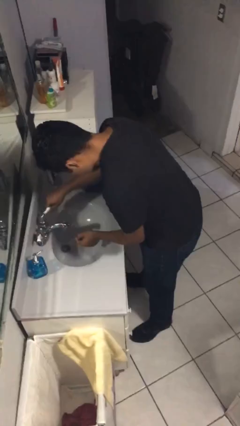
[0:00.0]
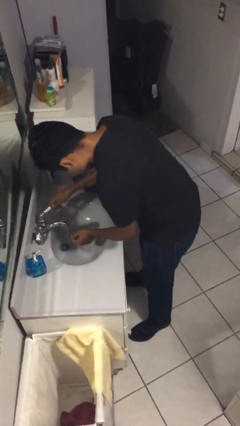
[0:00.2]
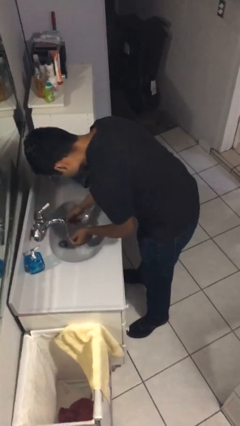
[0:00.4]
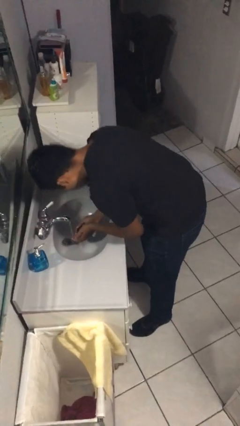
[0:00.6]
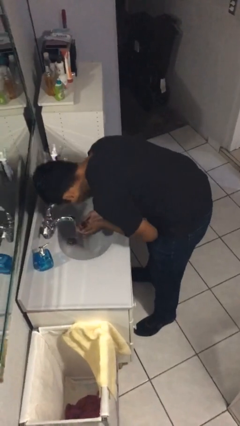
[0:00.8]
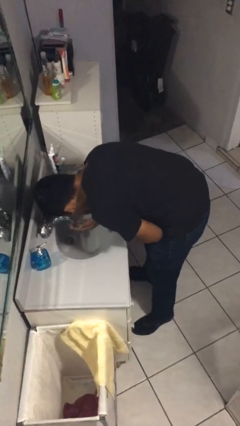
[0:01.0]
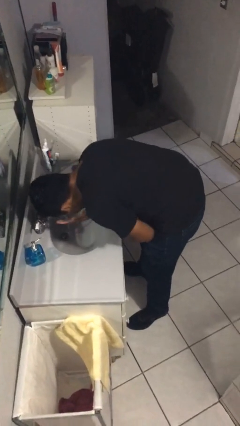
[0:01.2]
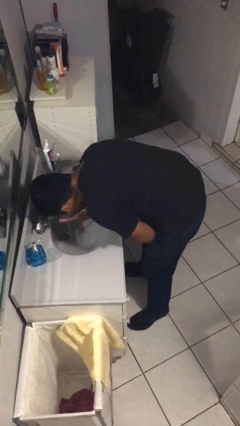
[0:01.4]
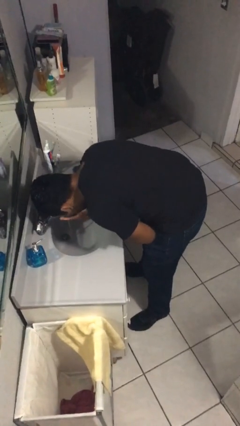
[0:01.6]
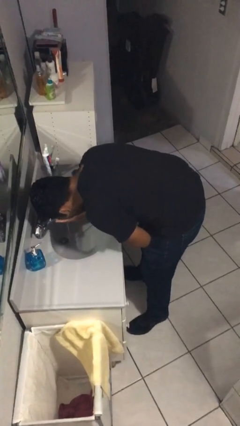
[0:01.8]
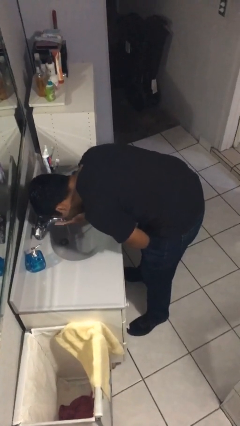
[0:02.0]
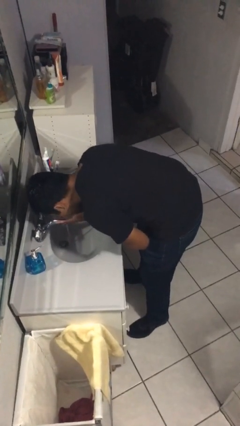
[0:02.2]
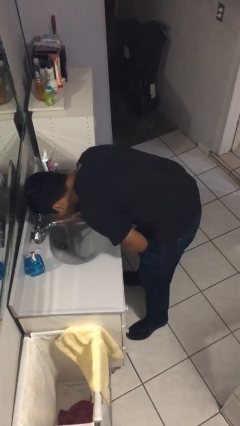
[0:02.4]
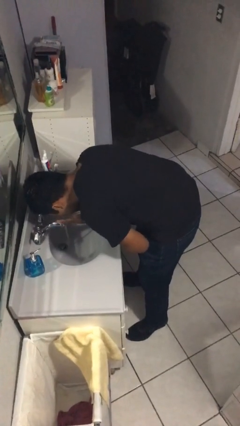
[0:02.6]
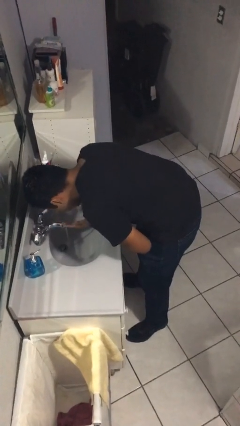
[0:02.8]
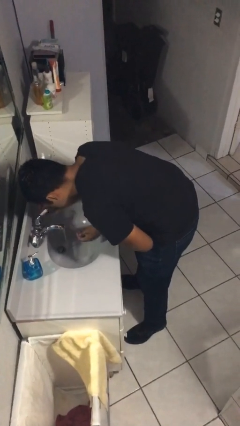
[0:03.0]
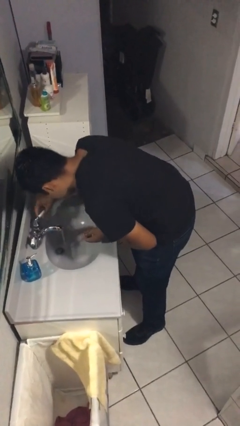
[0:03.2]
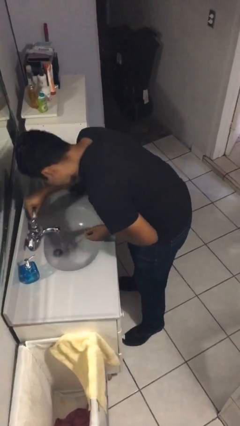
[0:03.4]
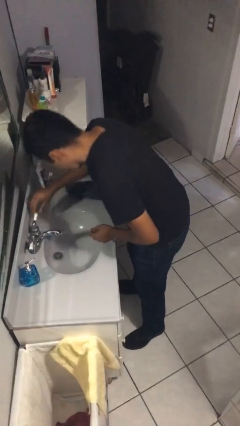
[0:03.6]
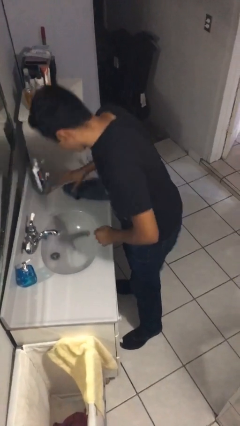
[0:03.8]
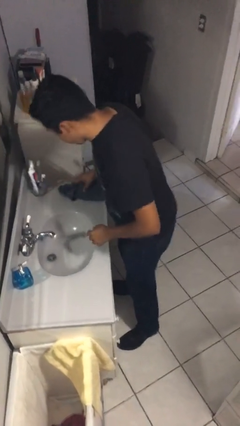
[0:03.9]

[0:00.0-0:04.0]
person washes face

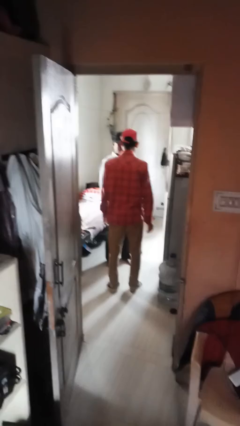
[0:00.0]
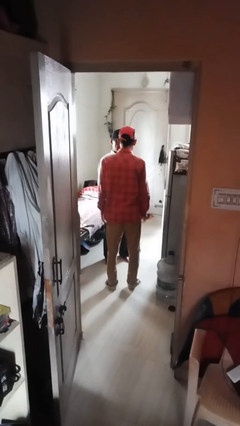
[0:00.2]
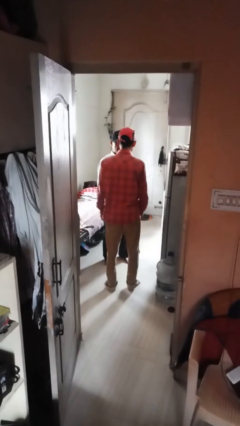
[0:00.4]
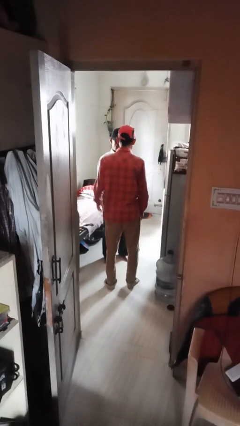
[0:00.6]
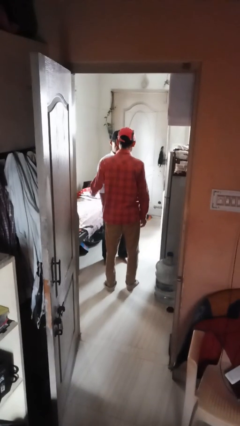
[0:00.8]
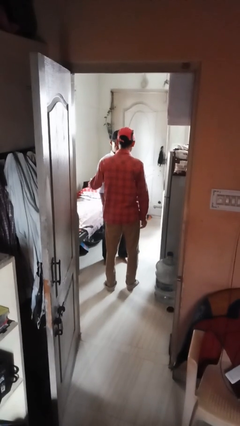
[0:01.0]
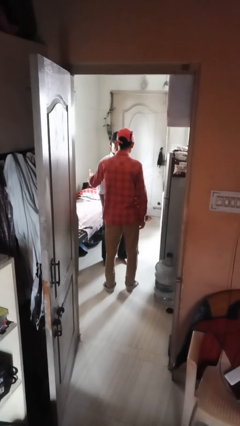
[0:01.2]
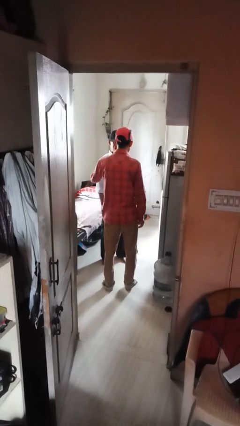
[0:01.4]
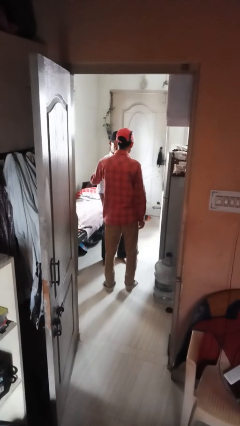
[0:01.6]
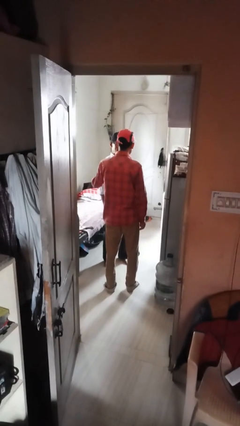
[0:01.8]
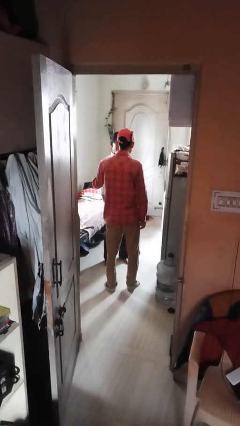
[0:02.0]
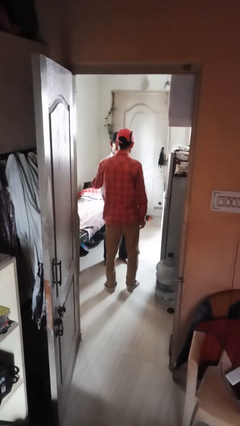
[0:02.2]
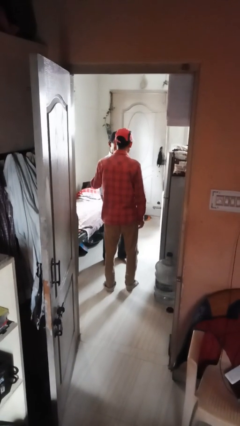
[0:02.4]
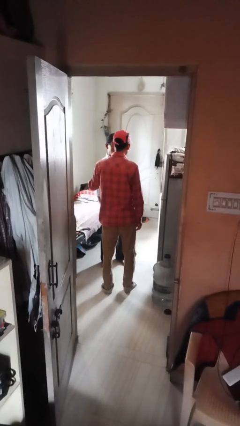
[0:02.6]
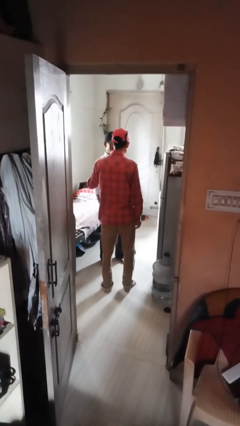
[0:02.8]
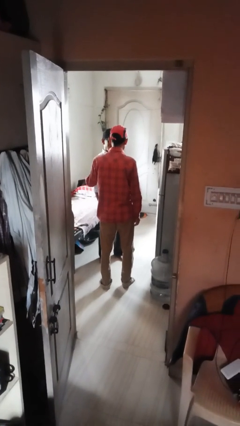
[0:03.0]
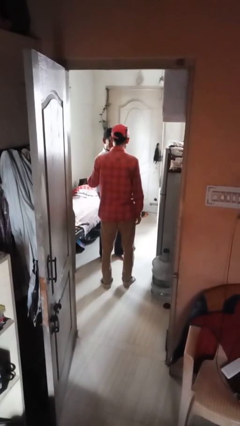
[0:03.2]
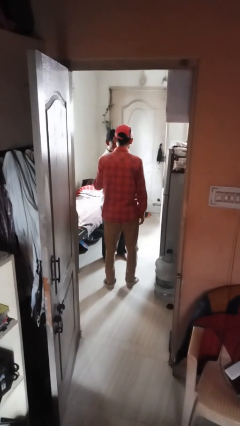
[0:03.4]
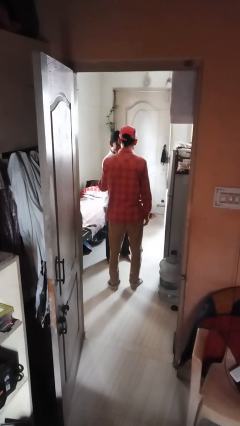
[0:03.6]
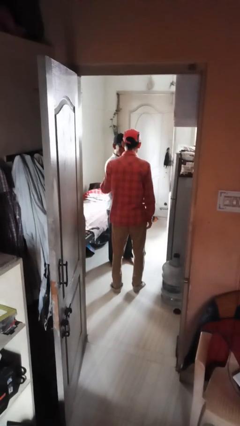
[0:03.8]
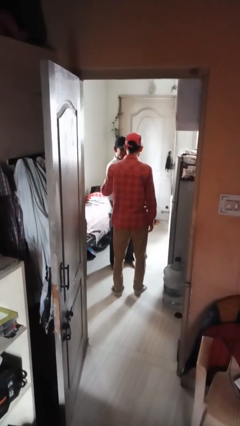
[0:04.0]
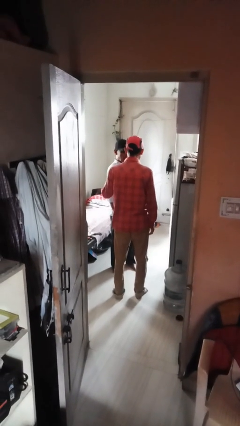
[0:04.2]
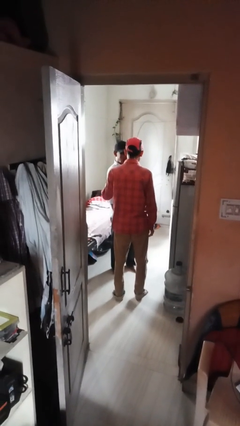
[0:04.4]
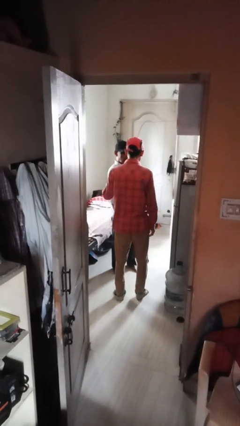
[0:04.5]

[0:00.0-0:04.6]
person grabs person by shoulder

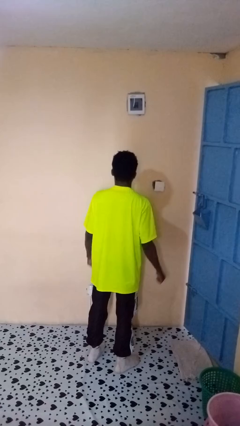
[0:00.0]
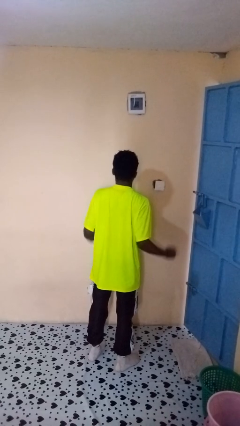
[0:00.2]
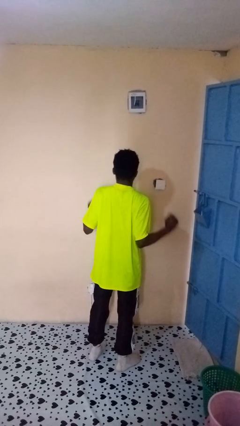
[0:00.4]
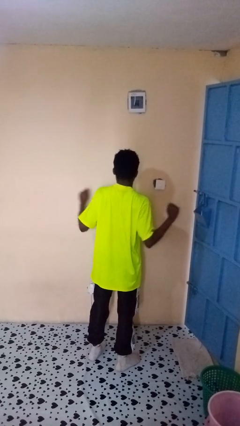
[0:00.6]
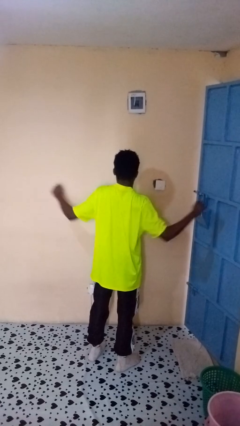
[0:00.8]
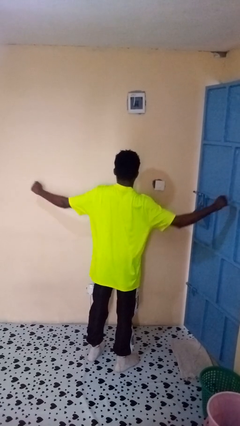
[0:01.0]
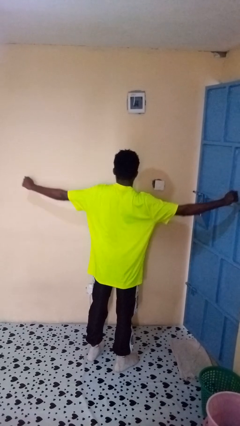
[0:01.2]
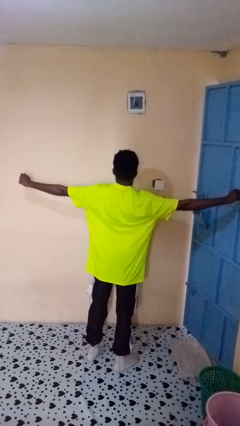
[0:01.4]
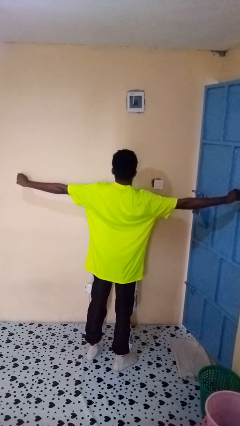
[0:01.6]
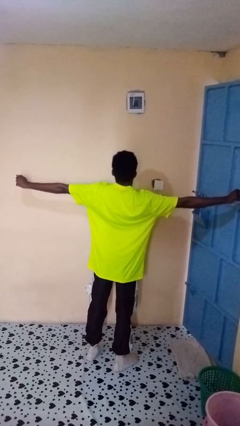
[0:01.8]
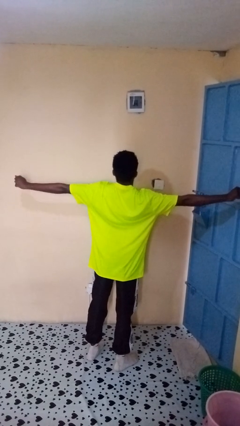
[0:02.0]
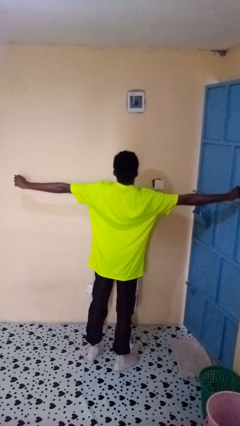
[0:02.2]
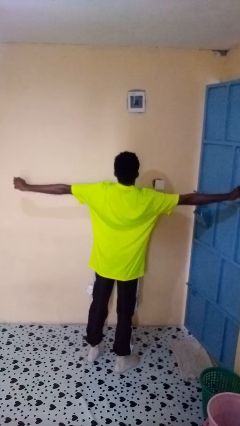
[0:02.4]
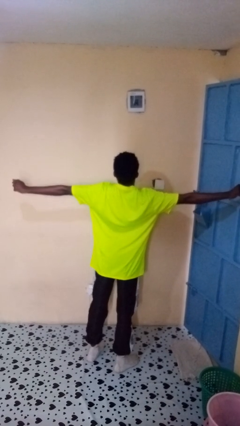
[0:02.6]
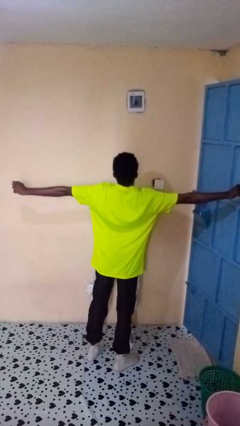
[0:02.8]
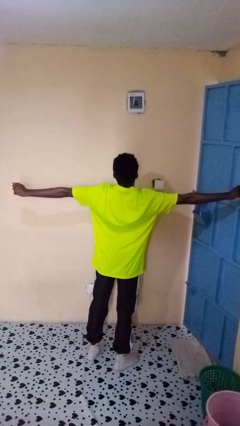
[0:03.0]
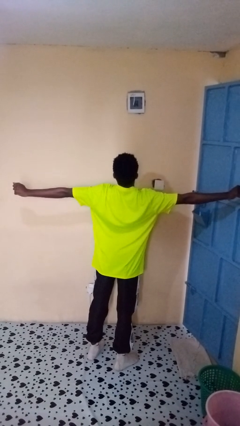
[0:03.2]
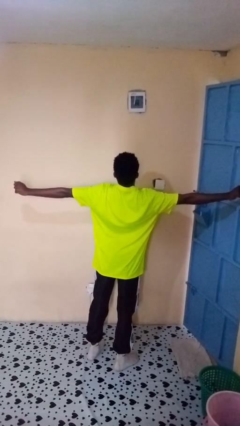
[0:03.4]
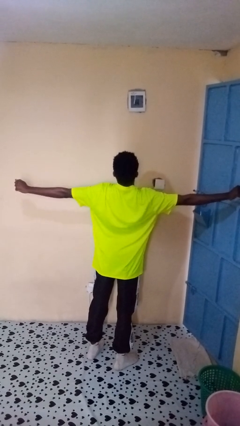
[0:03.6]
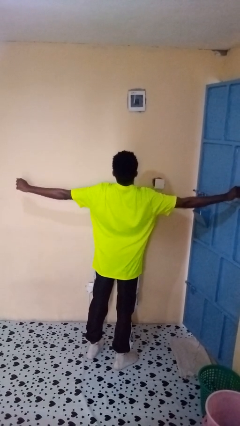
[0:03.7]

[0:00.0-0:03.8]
person stretches arms to side

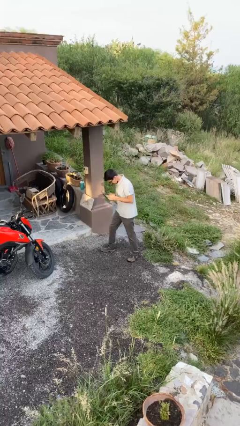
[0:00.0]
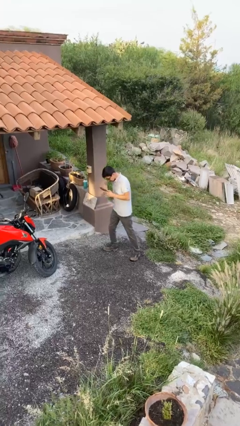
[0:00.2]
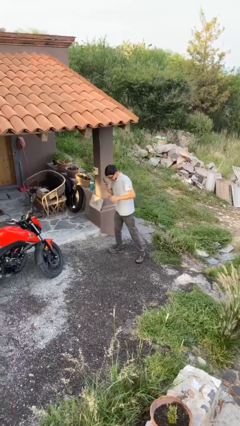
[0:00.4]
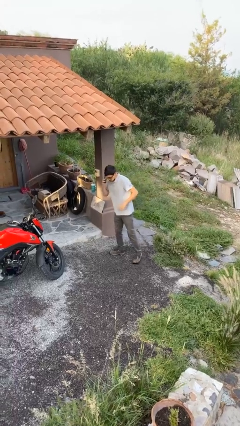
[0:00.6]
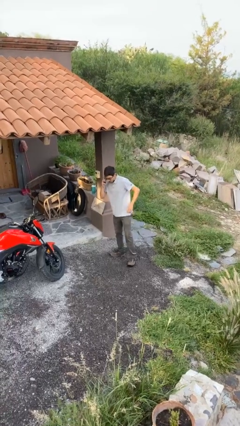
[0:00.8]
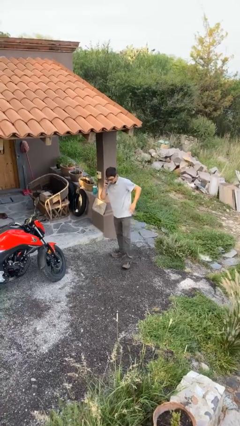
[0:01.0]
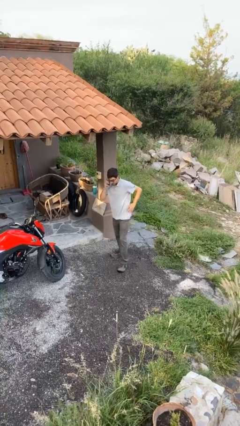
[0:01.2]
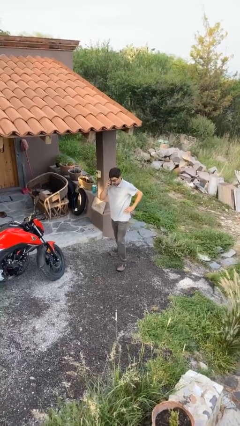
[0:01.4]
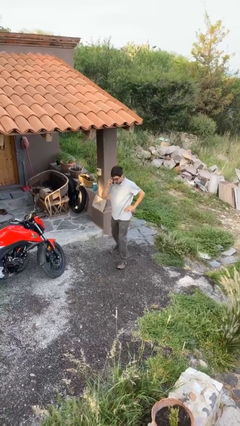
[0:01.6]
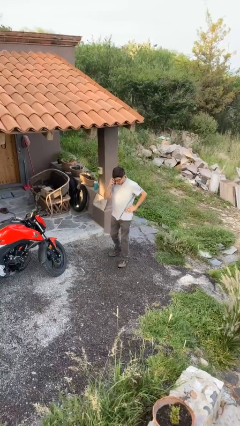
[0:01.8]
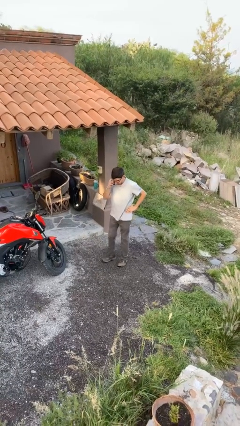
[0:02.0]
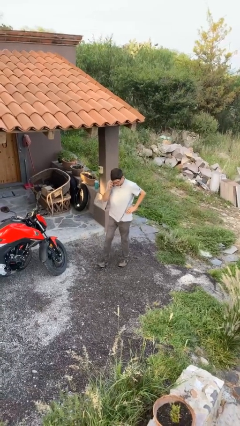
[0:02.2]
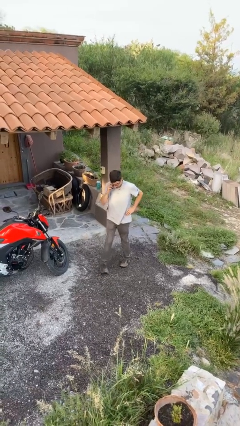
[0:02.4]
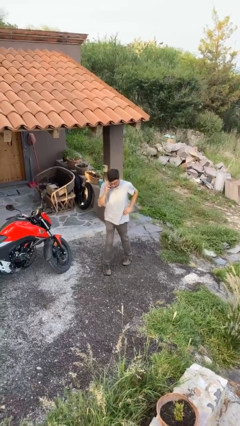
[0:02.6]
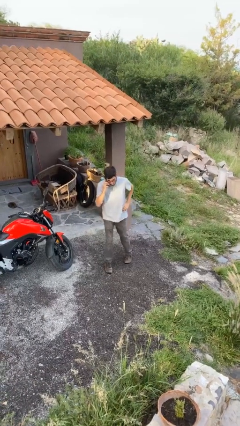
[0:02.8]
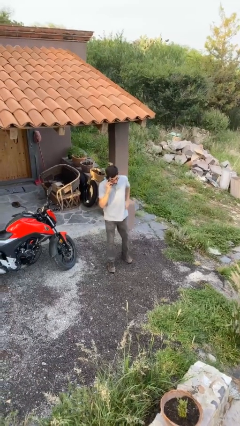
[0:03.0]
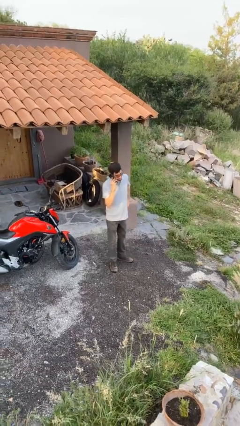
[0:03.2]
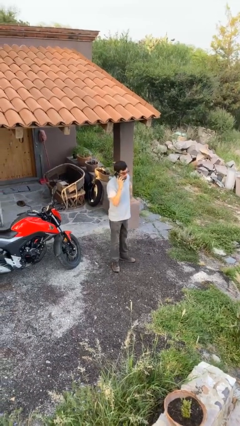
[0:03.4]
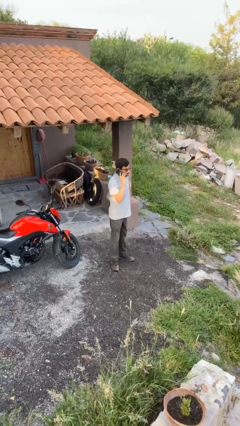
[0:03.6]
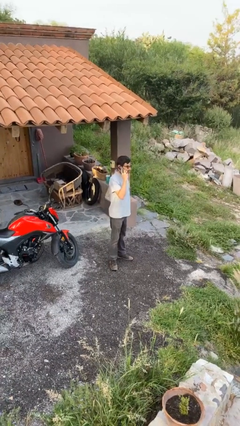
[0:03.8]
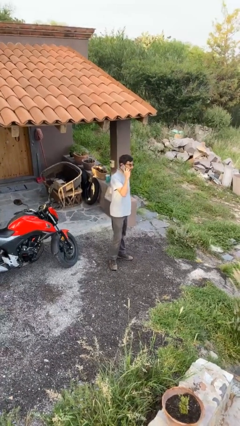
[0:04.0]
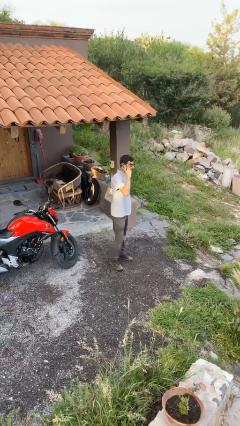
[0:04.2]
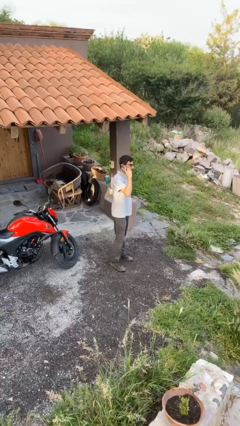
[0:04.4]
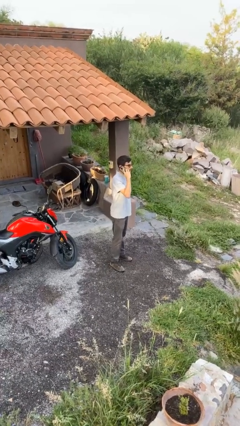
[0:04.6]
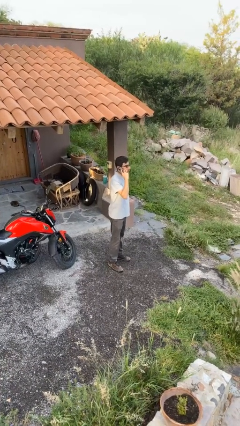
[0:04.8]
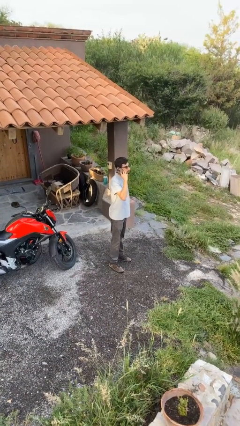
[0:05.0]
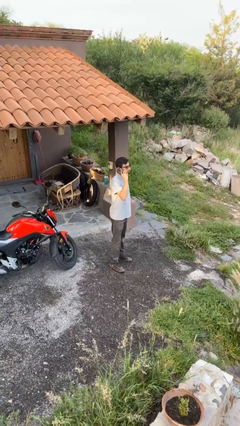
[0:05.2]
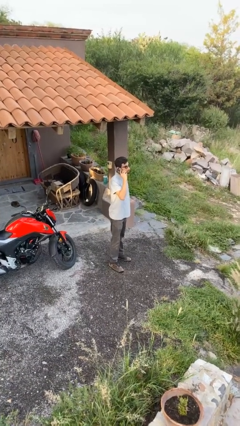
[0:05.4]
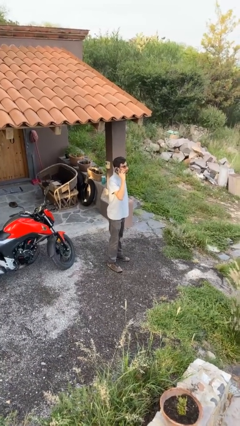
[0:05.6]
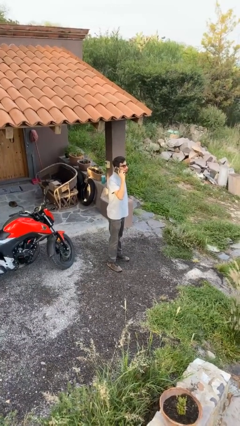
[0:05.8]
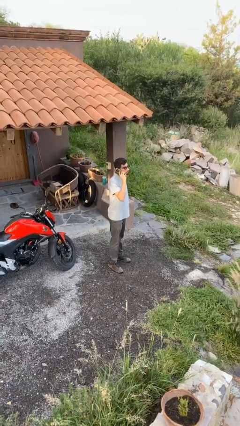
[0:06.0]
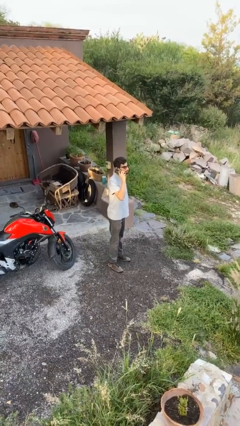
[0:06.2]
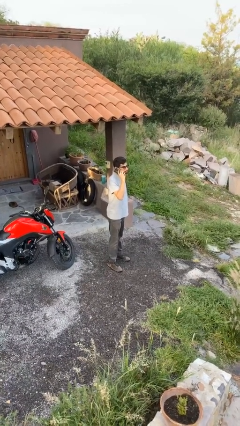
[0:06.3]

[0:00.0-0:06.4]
person talks on phone
